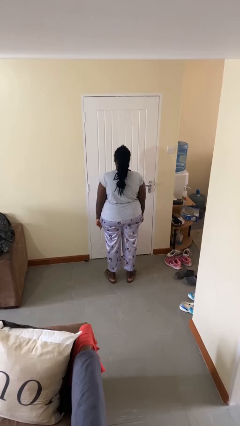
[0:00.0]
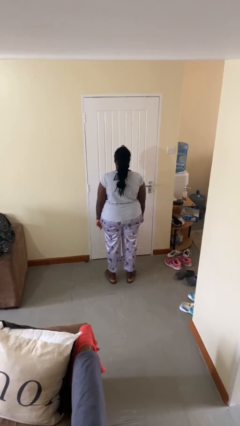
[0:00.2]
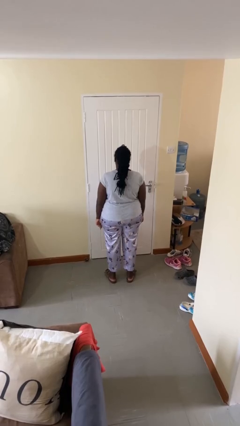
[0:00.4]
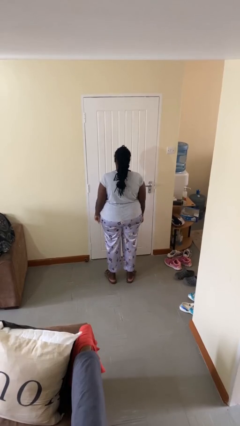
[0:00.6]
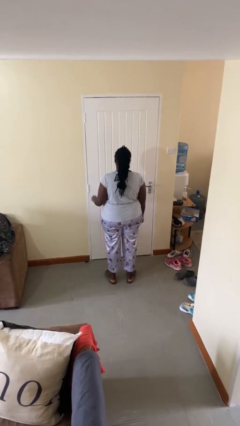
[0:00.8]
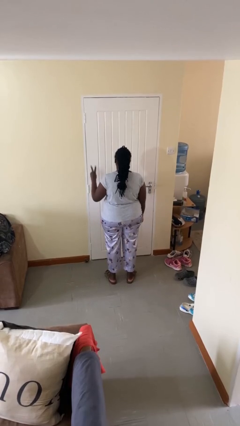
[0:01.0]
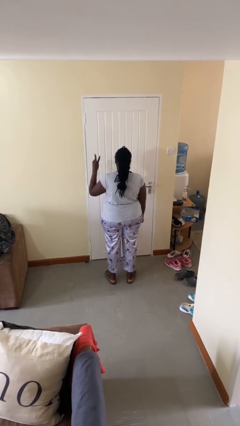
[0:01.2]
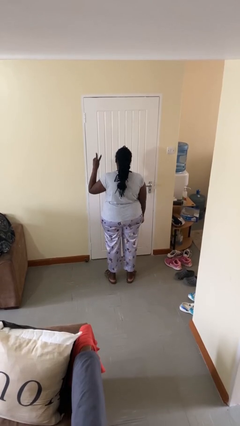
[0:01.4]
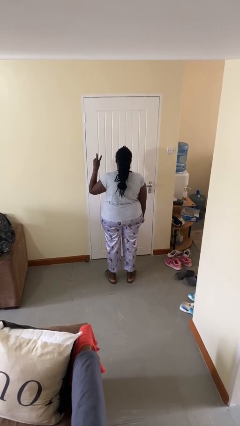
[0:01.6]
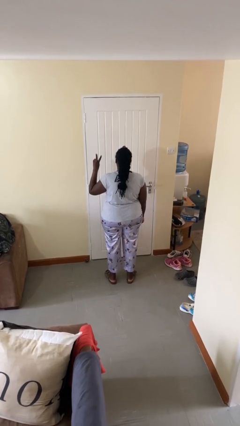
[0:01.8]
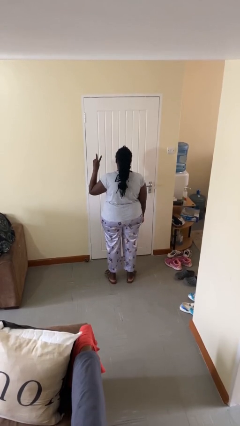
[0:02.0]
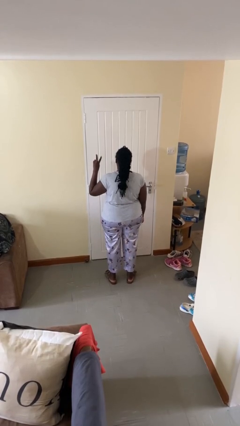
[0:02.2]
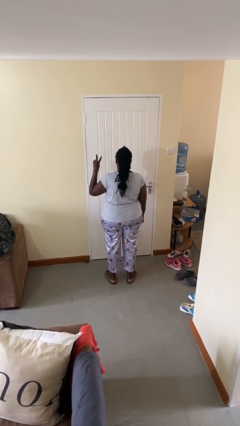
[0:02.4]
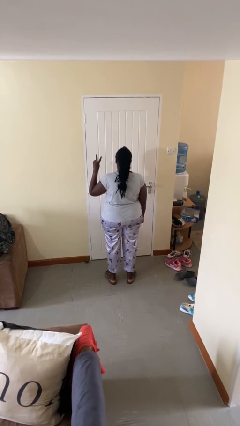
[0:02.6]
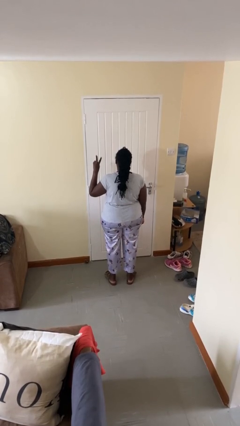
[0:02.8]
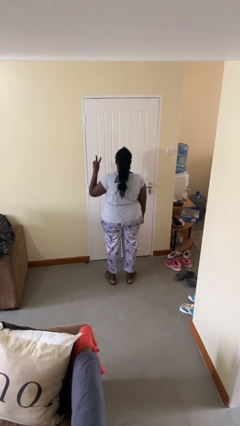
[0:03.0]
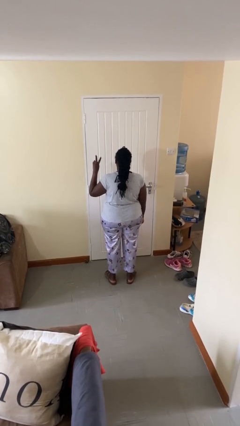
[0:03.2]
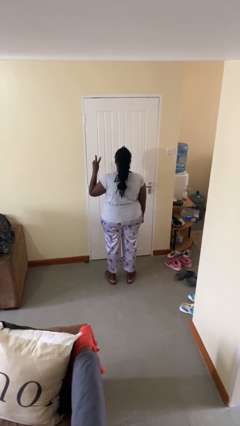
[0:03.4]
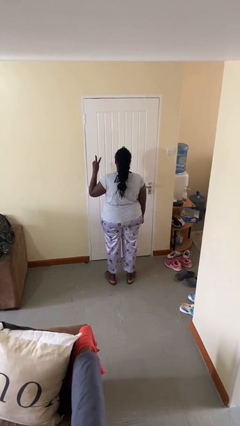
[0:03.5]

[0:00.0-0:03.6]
person gestures peace

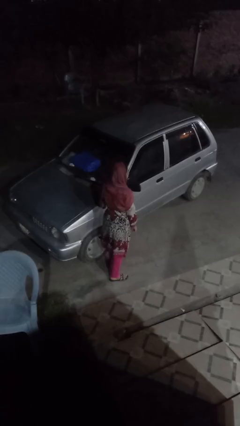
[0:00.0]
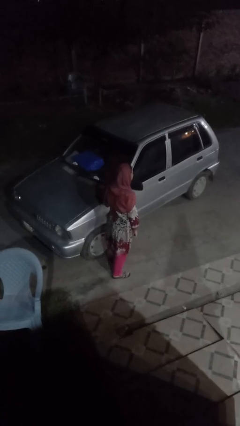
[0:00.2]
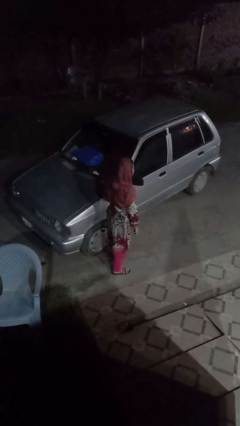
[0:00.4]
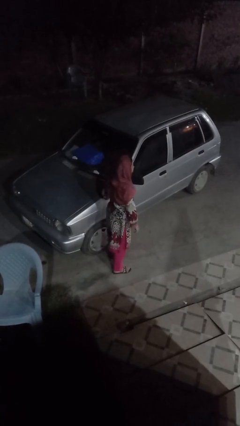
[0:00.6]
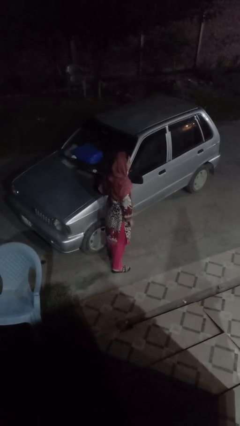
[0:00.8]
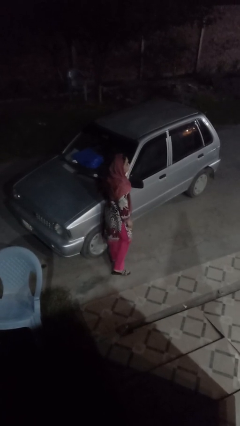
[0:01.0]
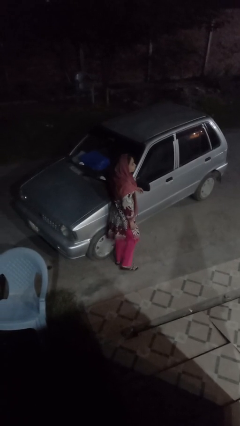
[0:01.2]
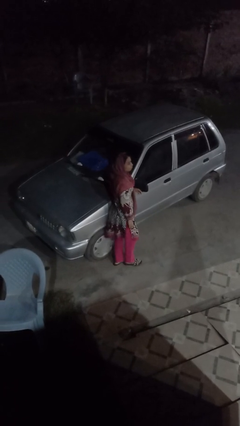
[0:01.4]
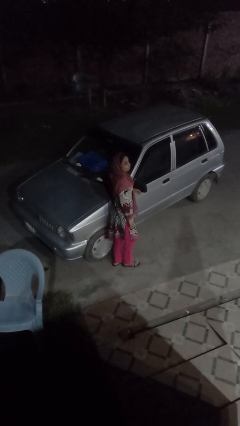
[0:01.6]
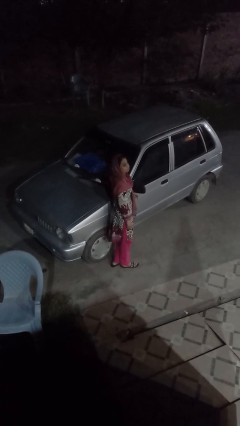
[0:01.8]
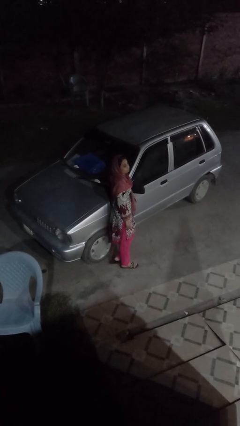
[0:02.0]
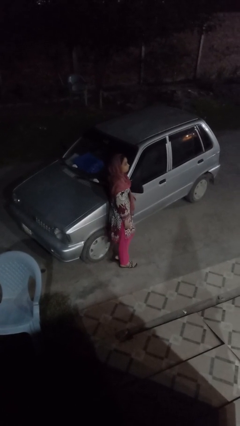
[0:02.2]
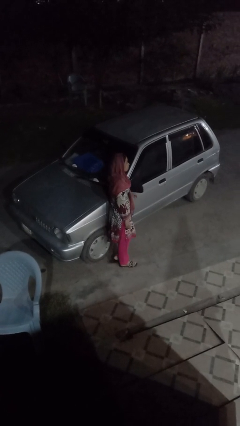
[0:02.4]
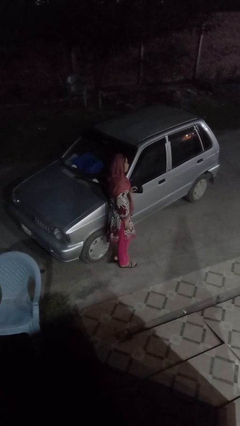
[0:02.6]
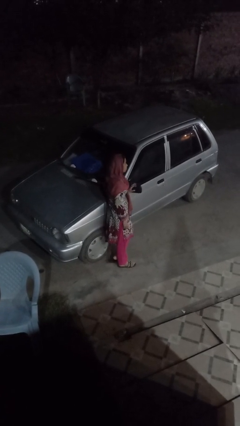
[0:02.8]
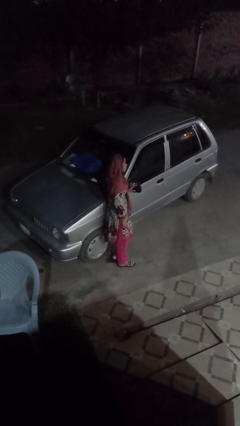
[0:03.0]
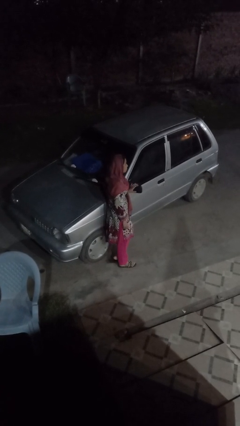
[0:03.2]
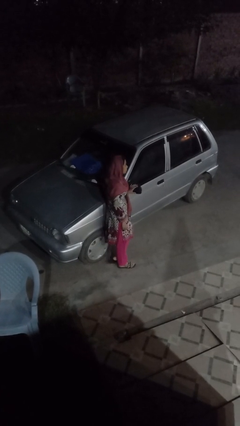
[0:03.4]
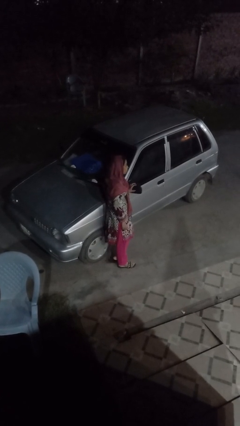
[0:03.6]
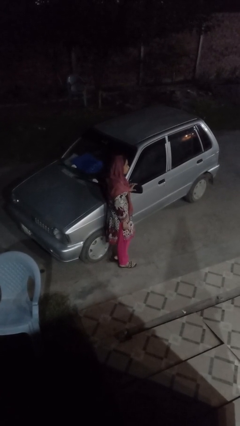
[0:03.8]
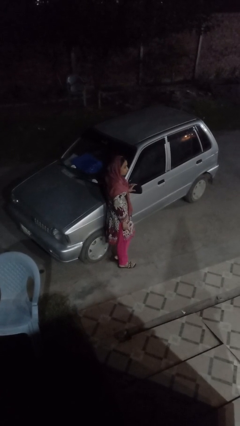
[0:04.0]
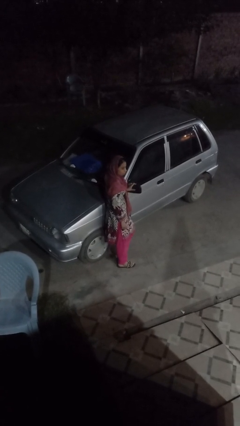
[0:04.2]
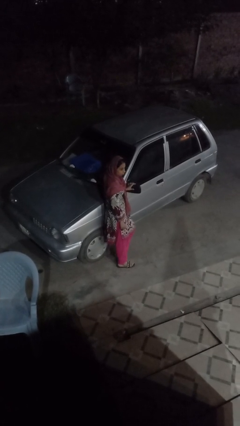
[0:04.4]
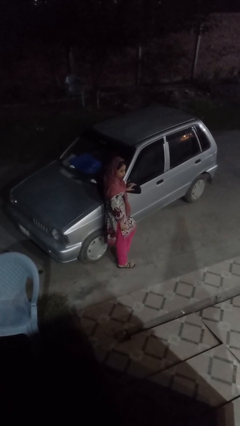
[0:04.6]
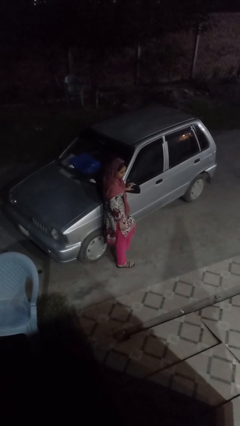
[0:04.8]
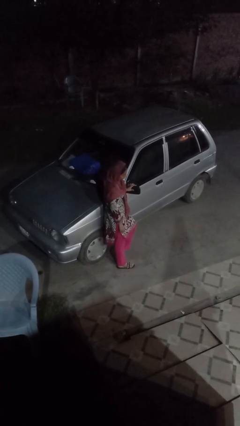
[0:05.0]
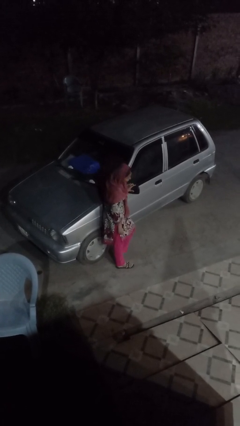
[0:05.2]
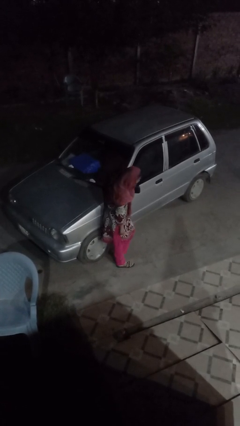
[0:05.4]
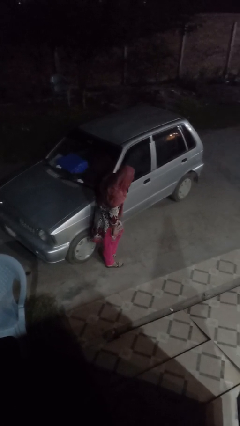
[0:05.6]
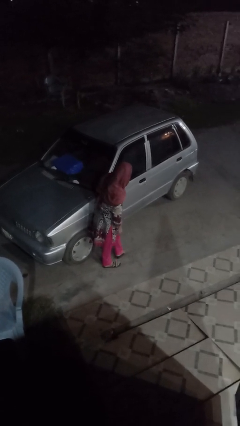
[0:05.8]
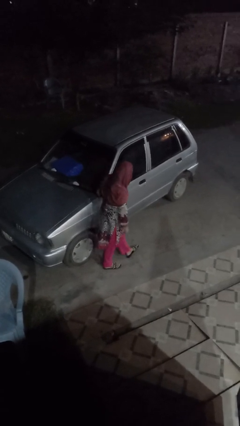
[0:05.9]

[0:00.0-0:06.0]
person leans against car

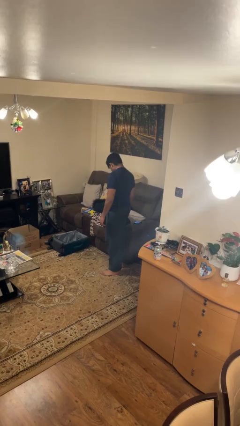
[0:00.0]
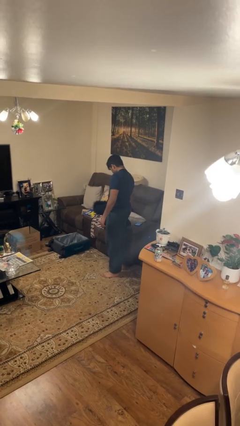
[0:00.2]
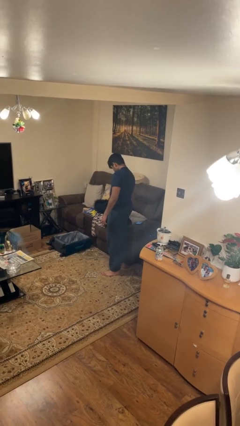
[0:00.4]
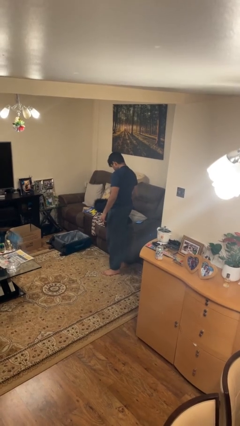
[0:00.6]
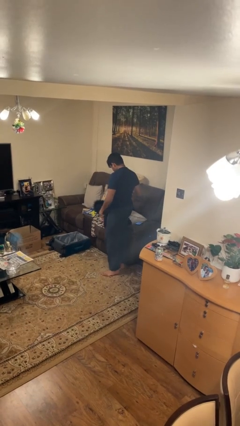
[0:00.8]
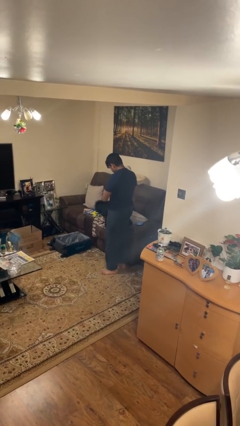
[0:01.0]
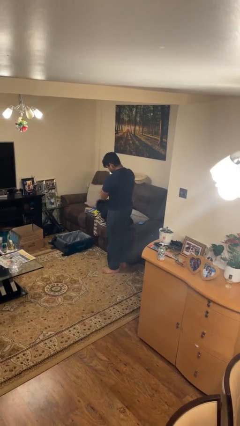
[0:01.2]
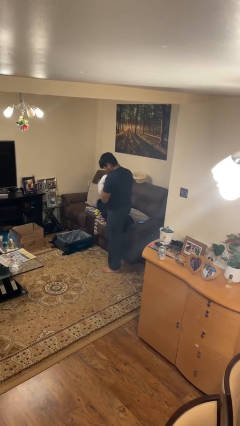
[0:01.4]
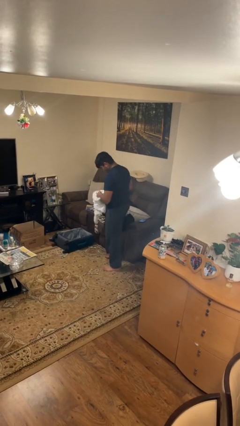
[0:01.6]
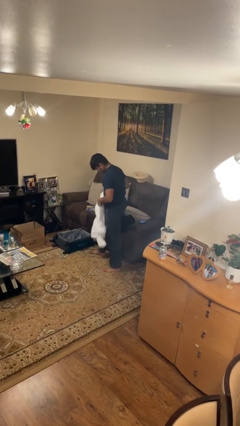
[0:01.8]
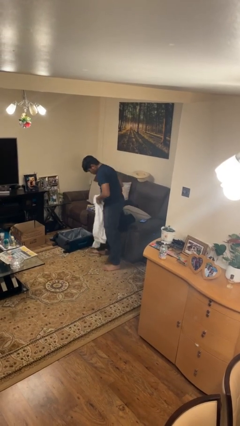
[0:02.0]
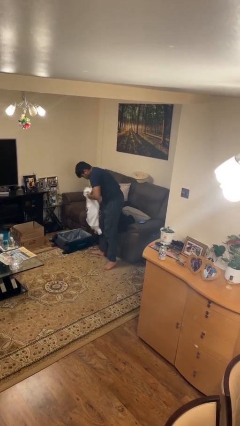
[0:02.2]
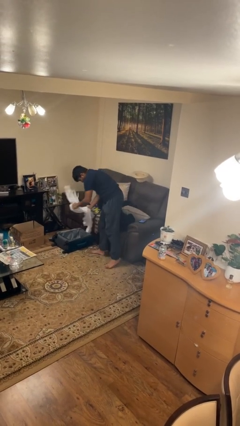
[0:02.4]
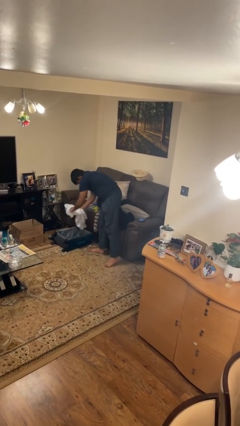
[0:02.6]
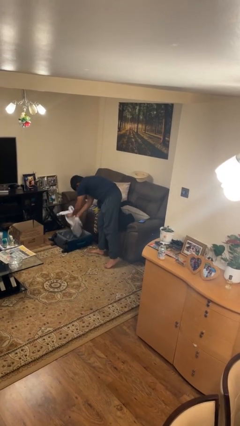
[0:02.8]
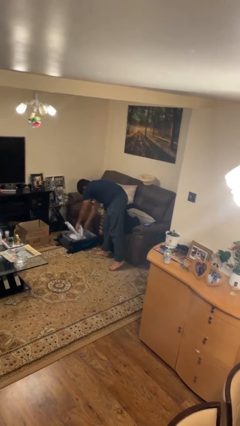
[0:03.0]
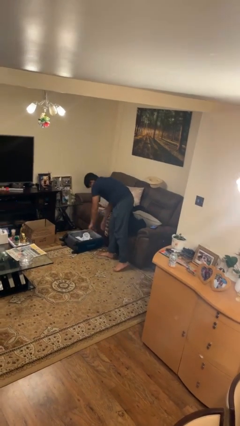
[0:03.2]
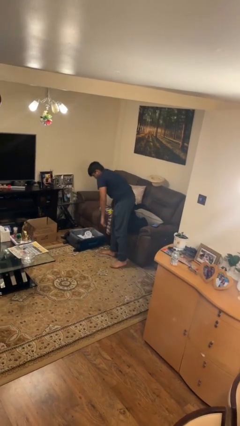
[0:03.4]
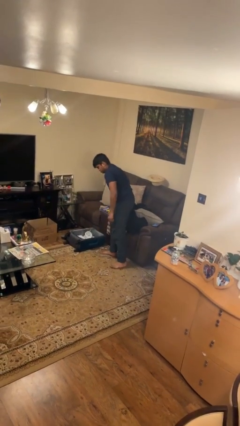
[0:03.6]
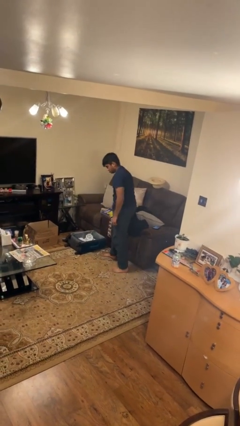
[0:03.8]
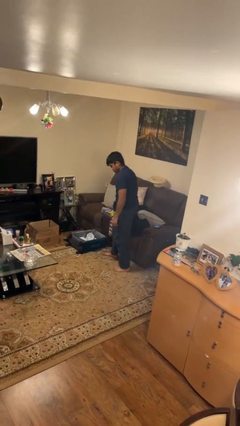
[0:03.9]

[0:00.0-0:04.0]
person loads clothes into suitcase

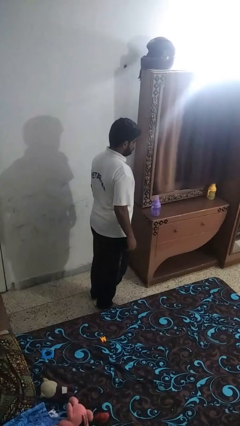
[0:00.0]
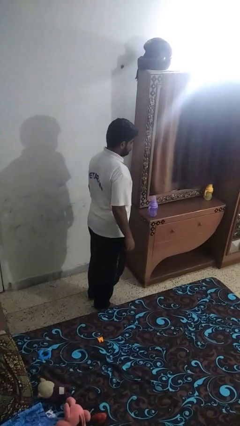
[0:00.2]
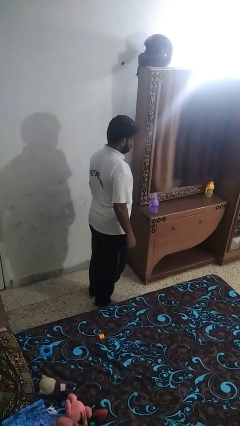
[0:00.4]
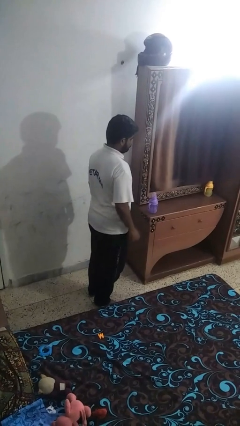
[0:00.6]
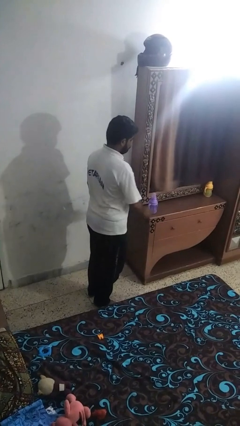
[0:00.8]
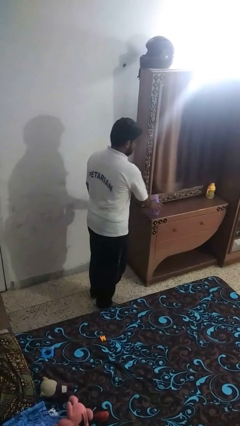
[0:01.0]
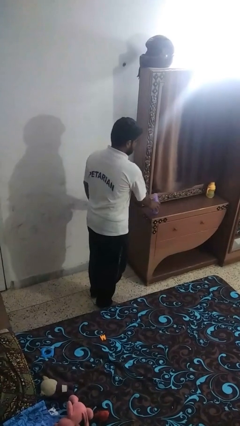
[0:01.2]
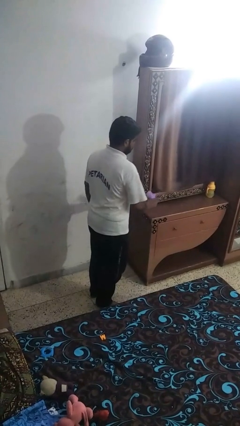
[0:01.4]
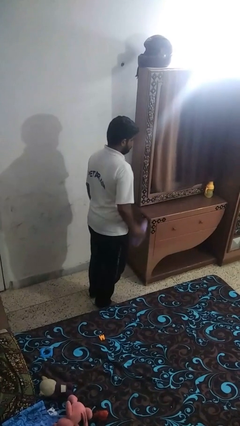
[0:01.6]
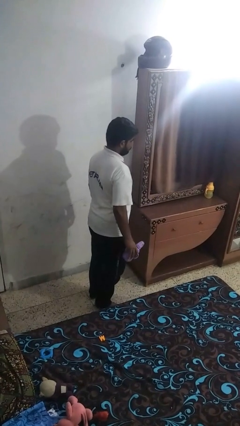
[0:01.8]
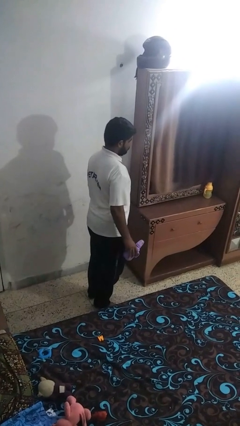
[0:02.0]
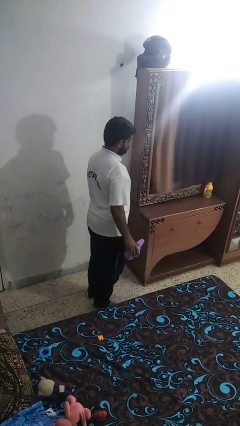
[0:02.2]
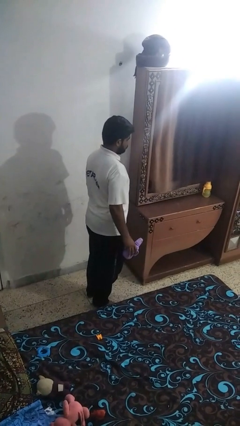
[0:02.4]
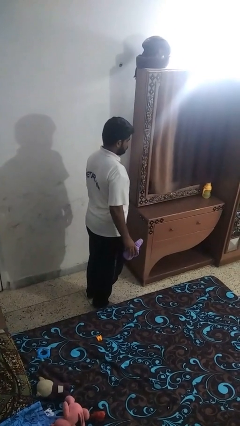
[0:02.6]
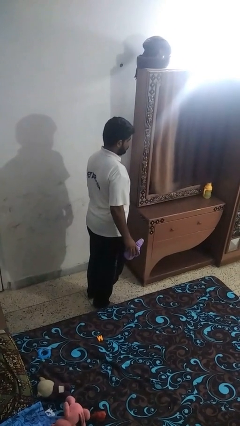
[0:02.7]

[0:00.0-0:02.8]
person picks up object from countertop

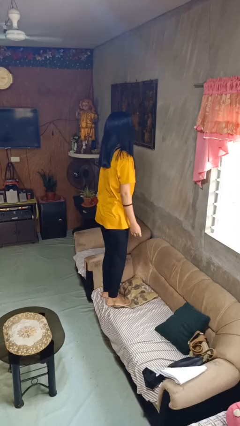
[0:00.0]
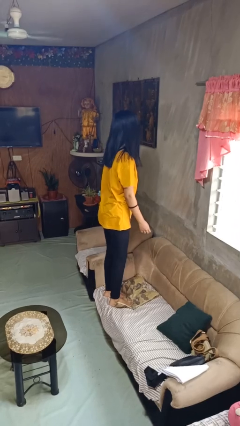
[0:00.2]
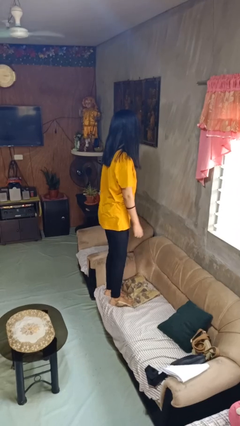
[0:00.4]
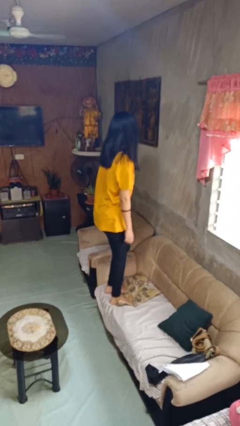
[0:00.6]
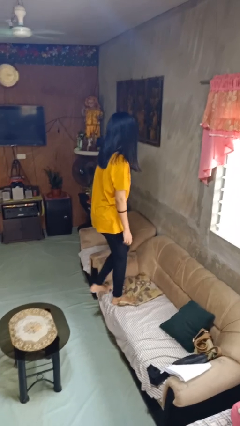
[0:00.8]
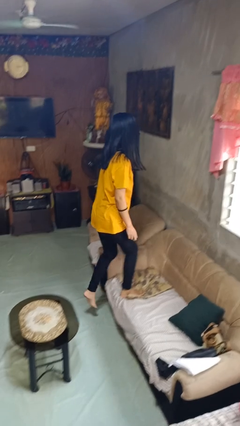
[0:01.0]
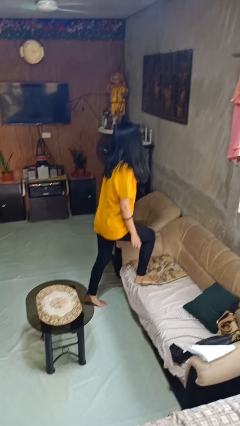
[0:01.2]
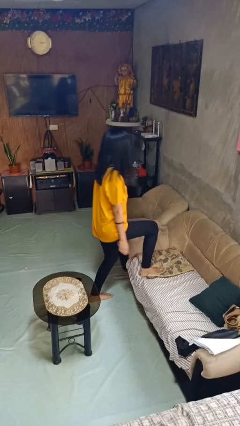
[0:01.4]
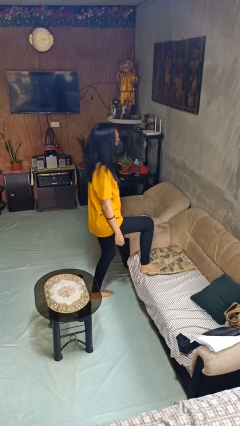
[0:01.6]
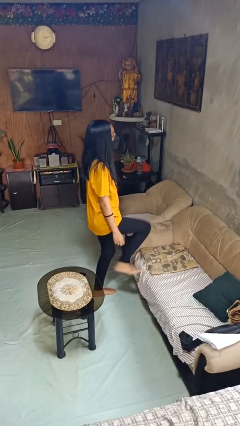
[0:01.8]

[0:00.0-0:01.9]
person climbs off couch
